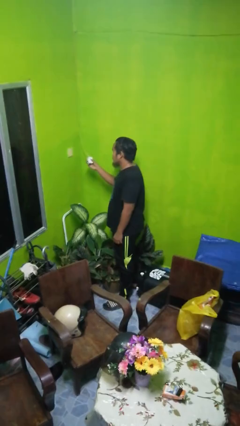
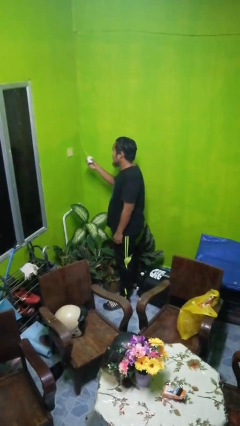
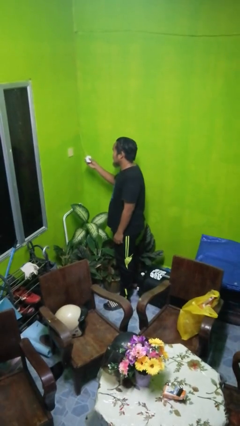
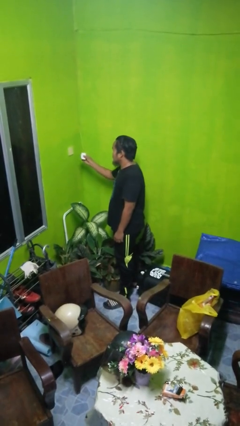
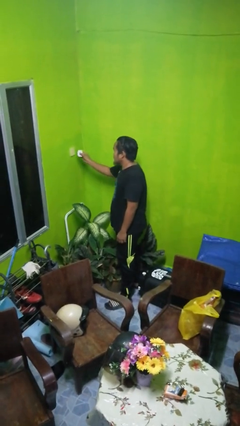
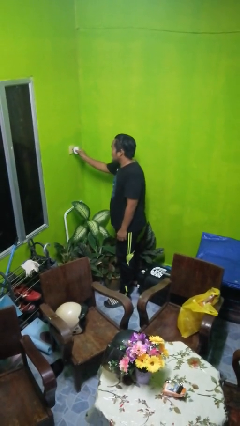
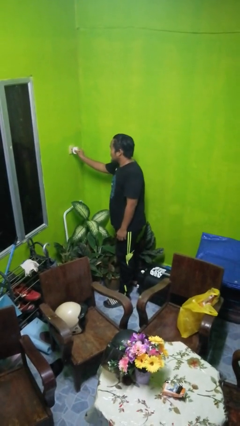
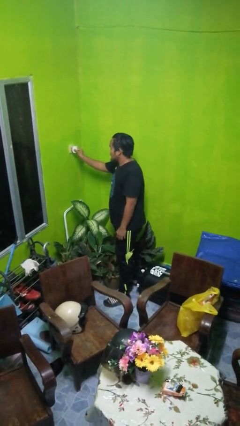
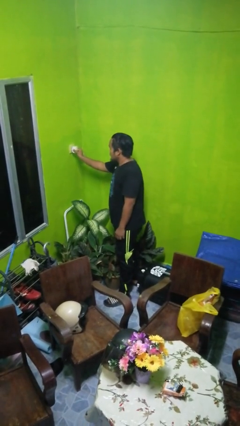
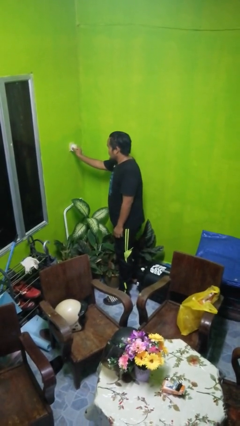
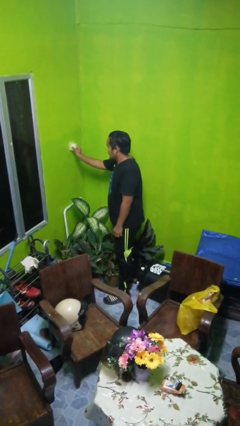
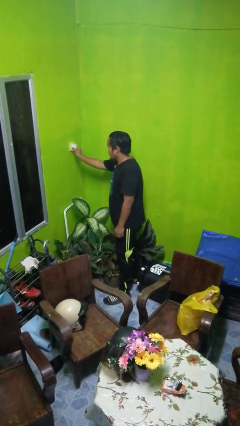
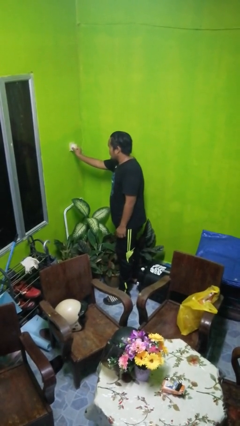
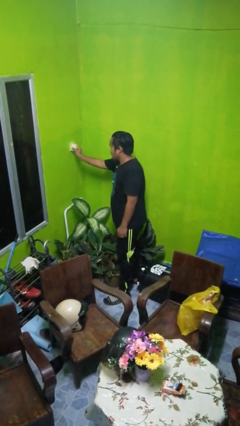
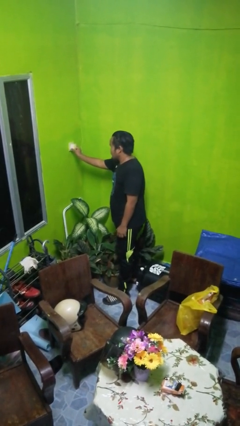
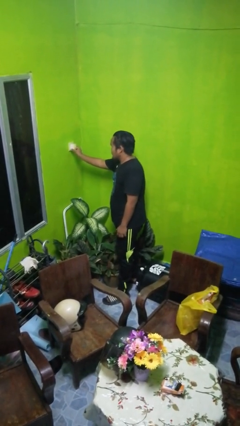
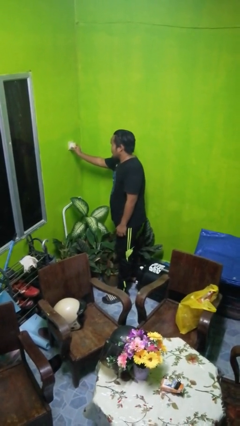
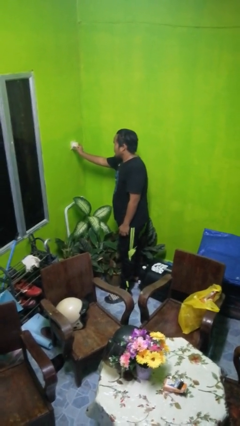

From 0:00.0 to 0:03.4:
person plugs into electrical socket

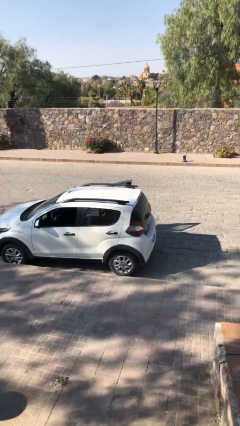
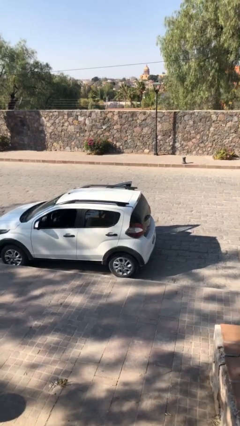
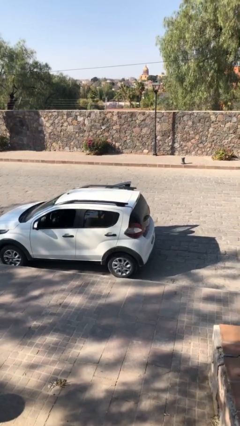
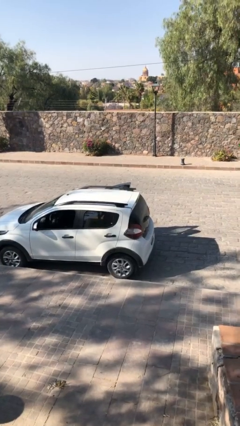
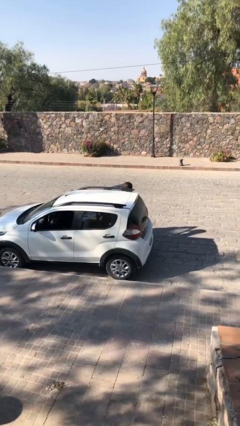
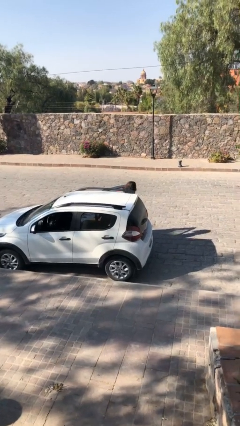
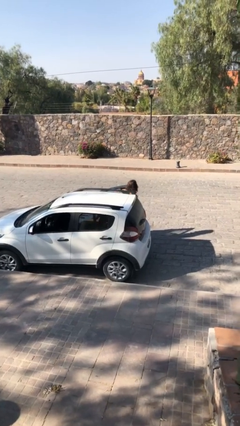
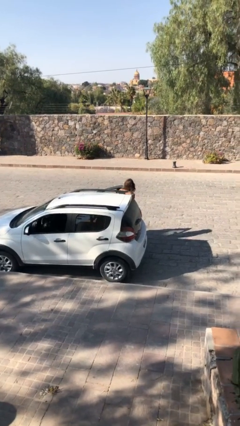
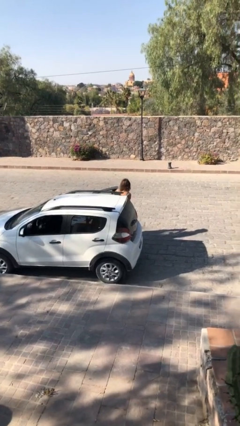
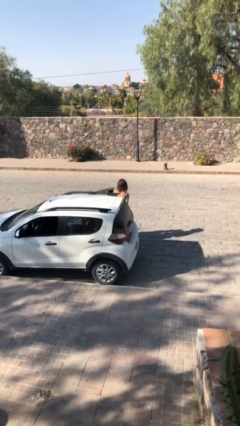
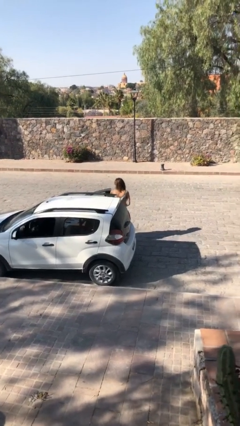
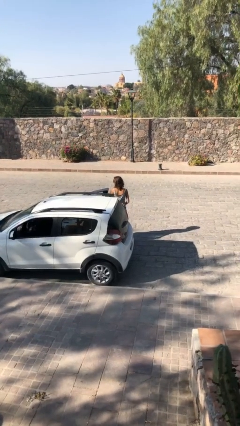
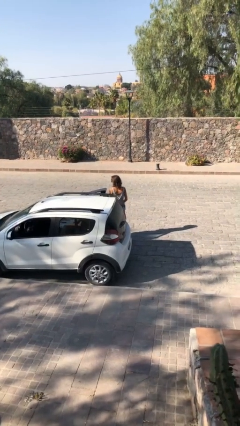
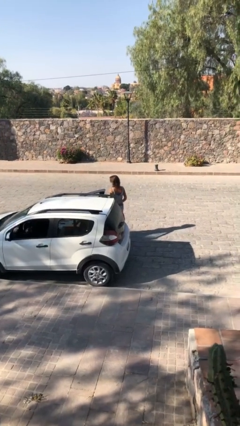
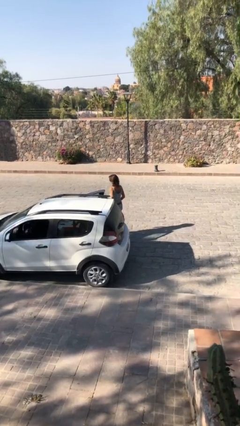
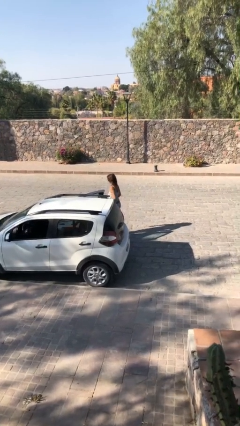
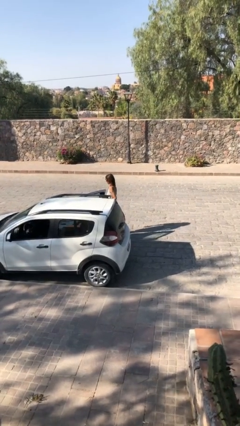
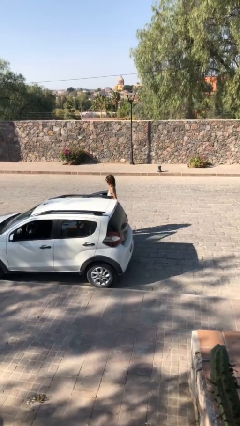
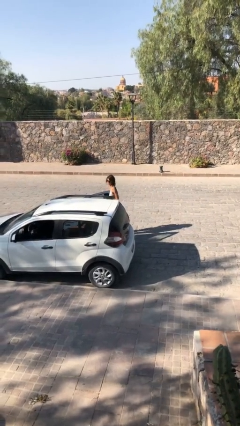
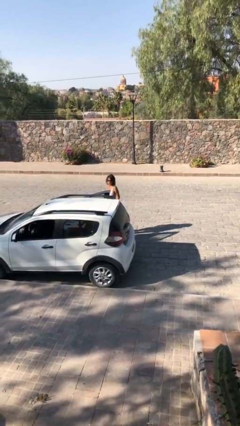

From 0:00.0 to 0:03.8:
person exits car

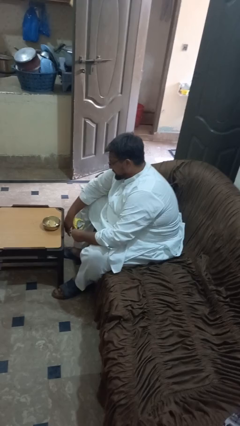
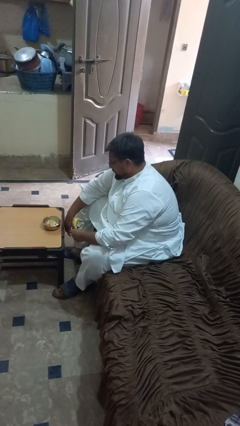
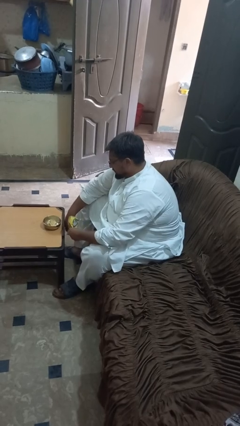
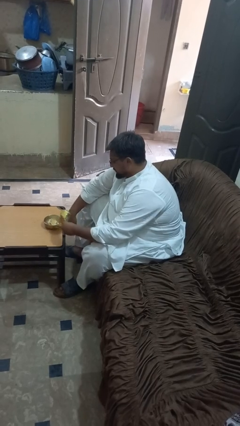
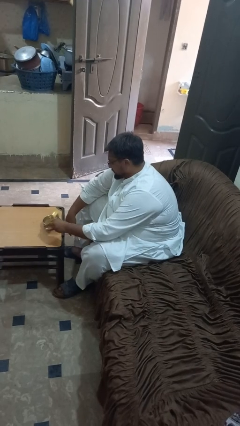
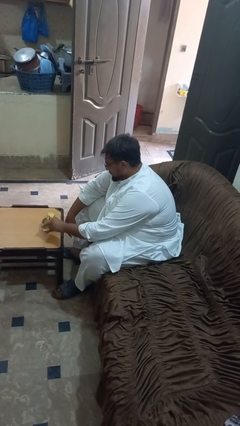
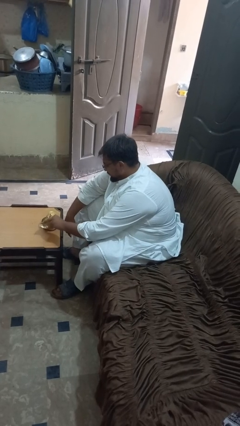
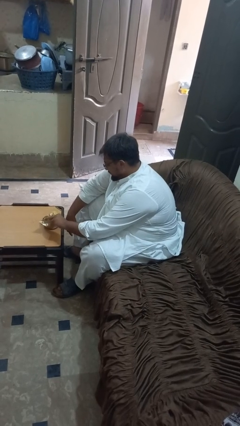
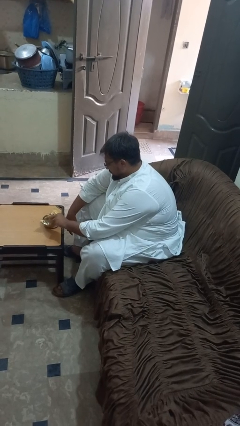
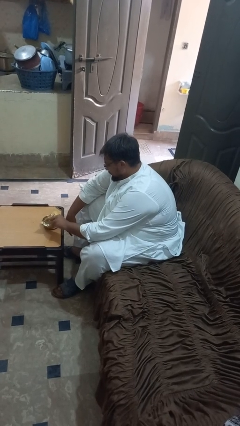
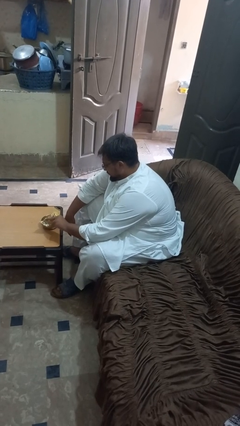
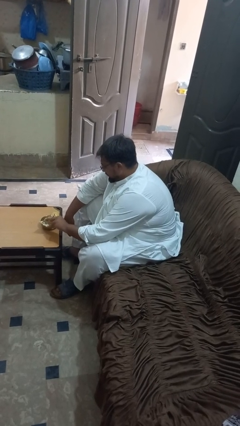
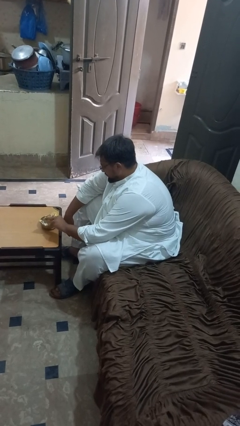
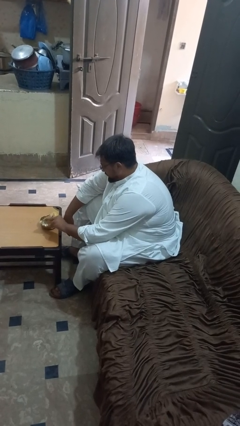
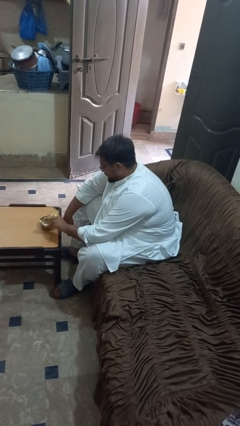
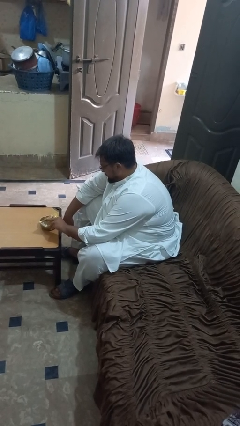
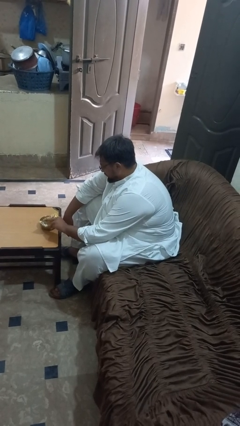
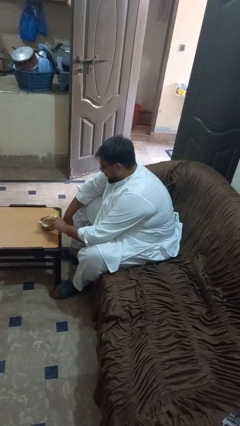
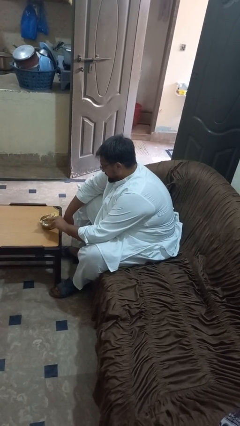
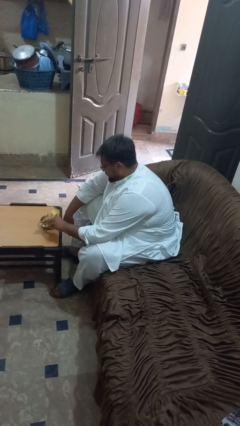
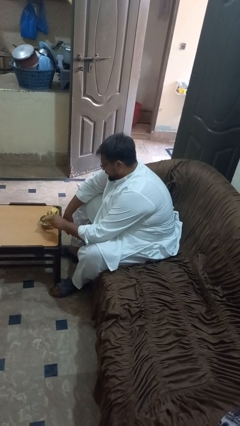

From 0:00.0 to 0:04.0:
person pours into bowl

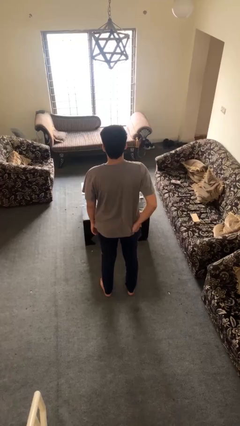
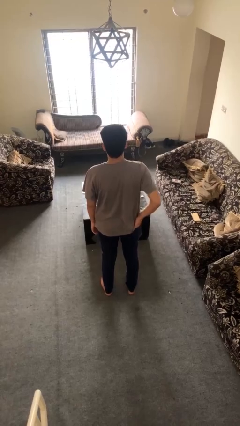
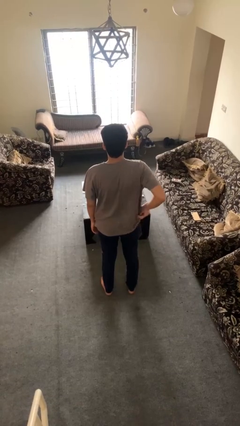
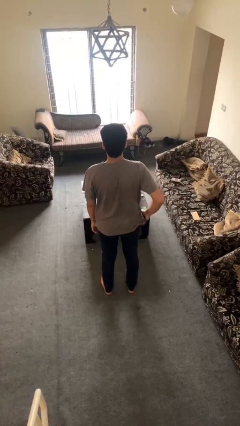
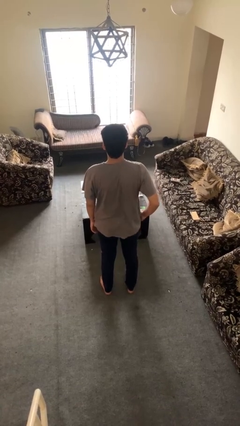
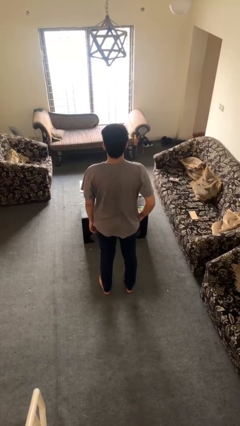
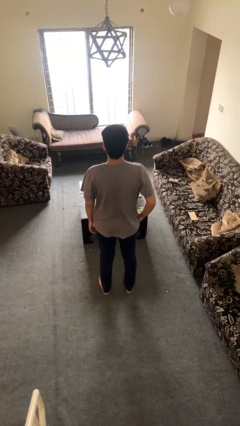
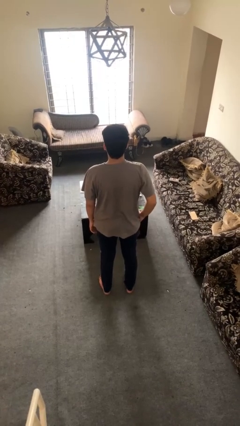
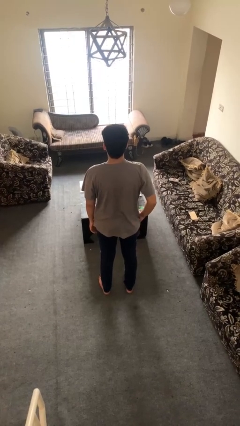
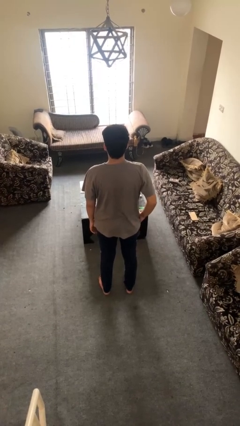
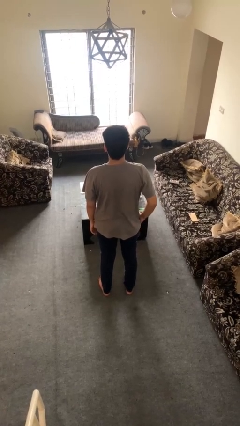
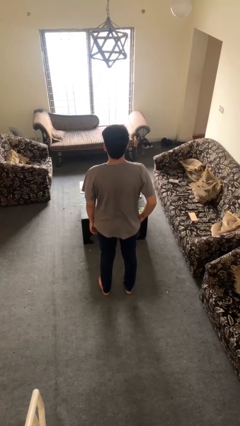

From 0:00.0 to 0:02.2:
person puts hands in back pockets

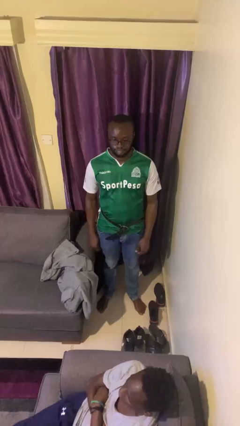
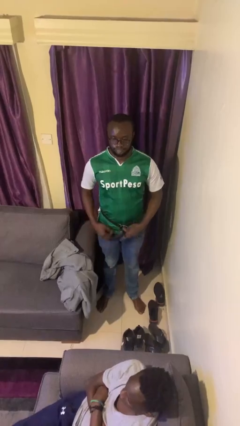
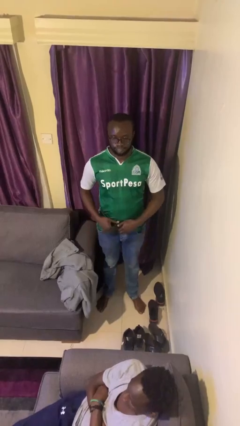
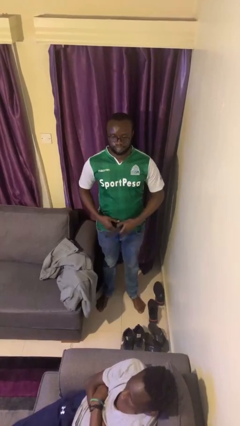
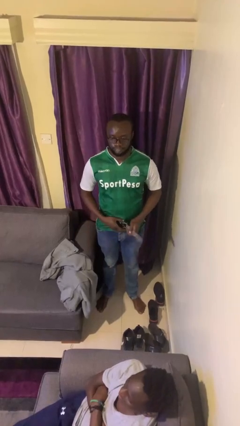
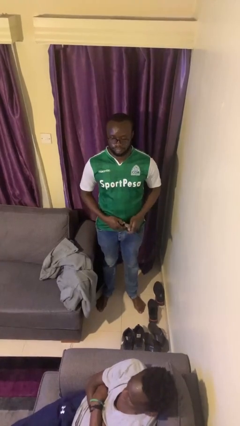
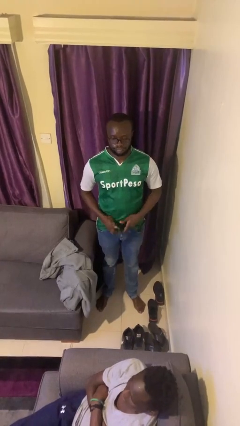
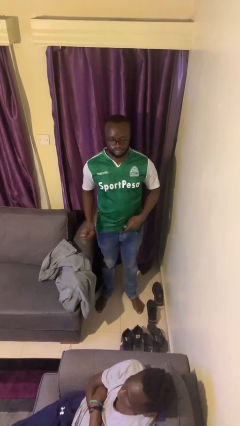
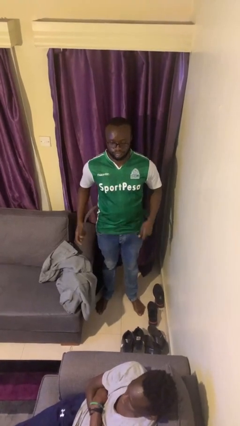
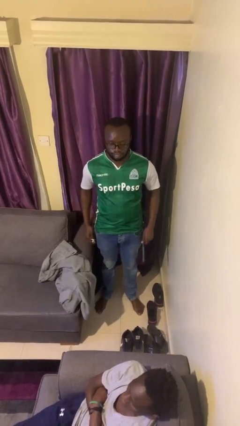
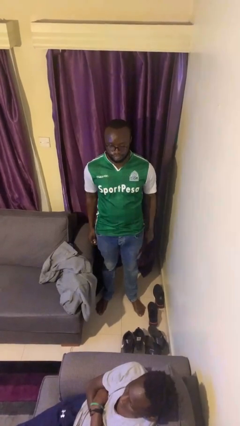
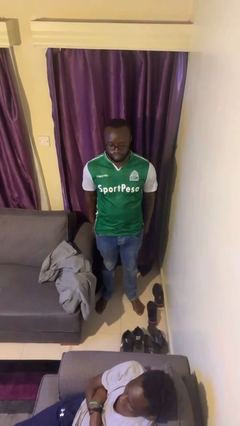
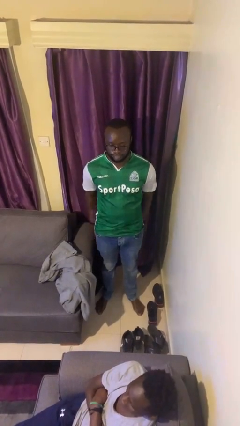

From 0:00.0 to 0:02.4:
person takes off belt

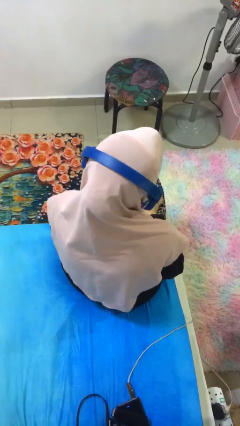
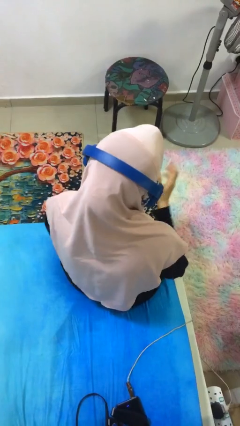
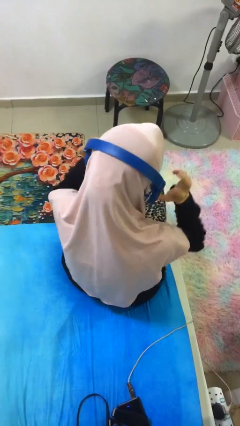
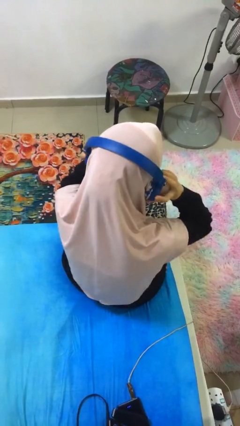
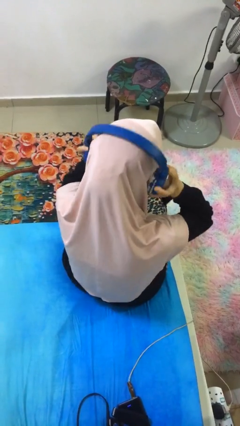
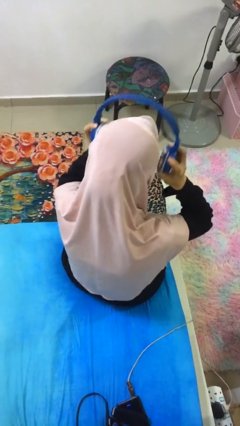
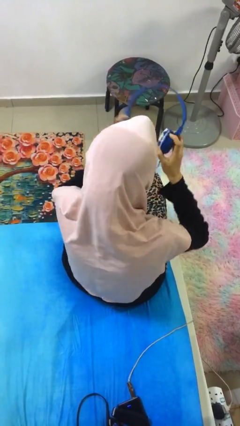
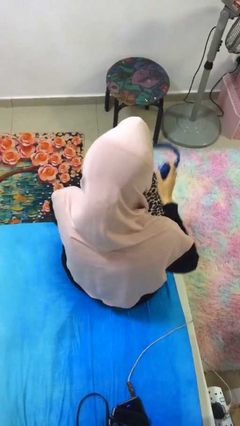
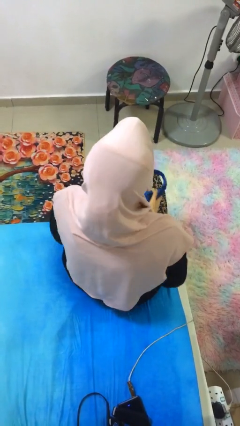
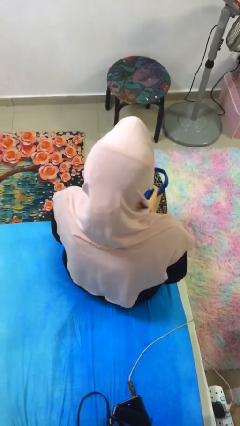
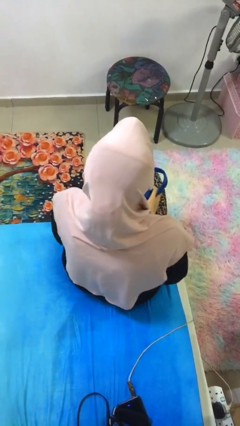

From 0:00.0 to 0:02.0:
person takes off headphones
